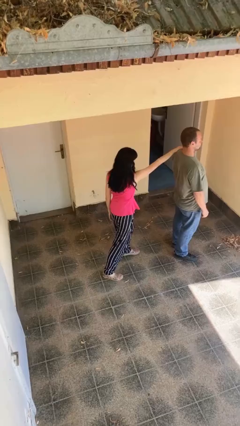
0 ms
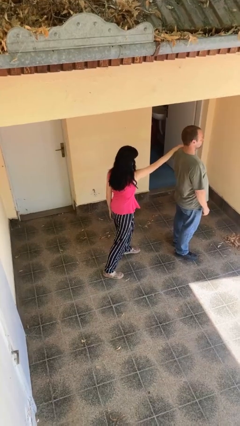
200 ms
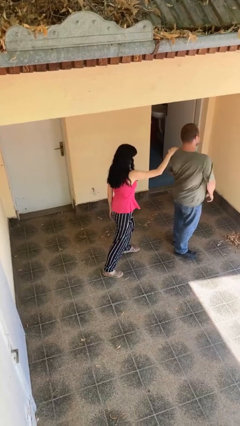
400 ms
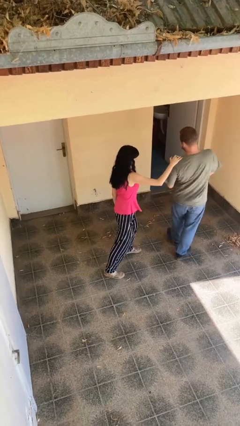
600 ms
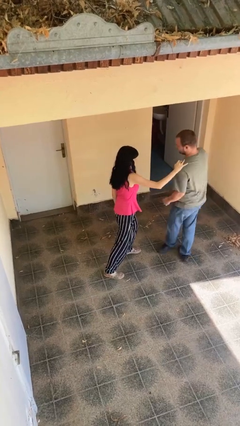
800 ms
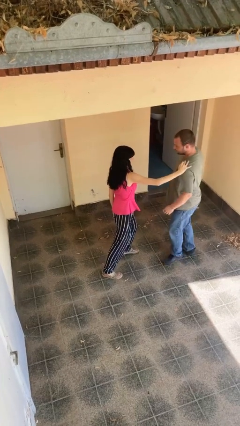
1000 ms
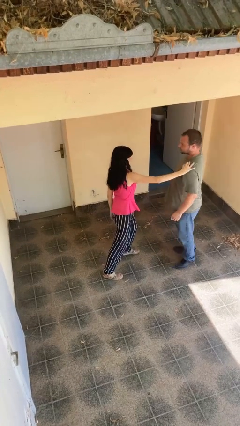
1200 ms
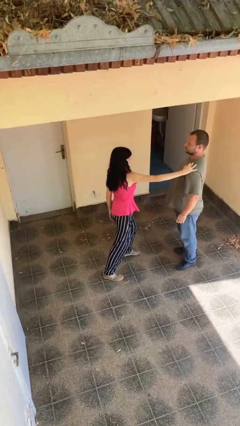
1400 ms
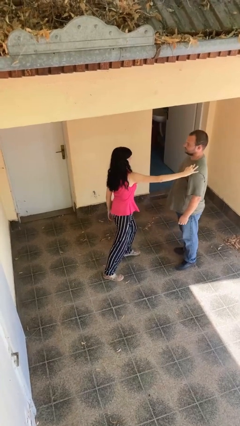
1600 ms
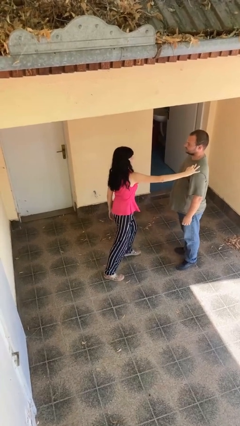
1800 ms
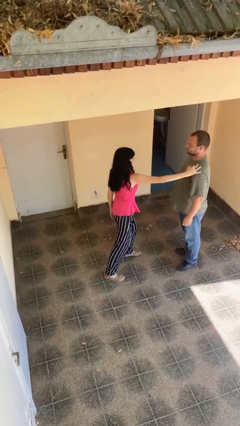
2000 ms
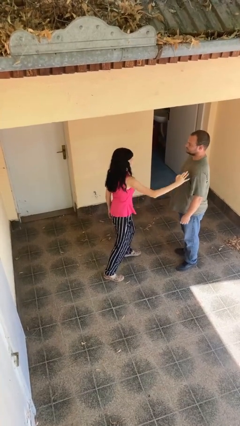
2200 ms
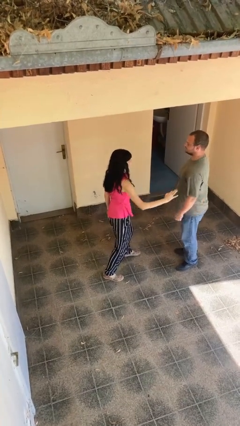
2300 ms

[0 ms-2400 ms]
person spins person around

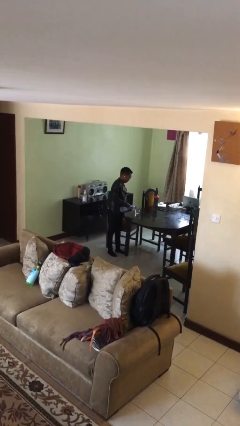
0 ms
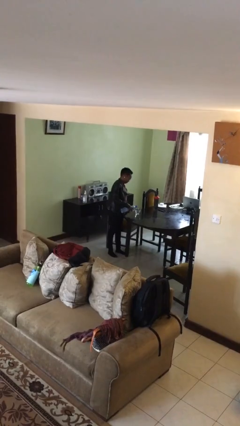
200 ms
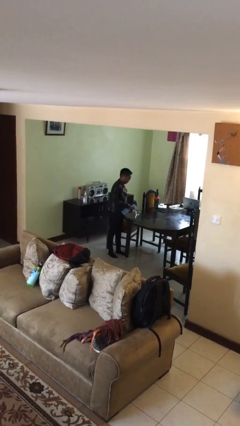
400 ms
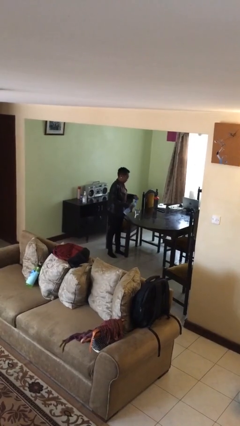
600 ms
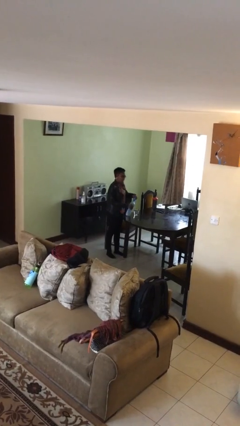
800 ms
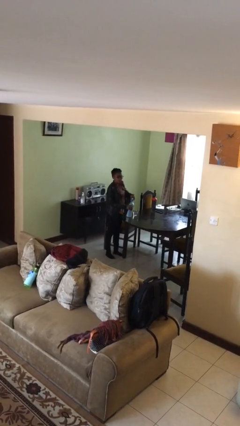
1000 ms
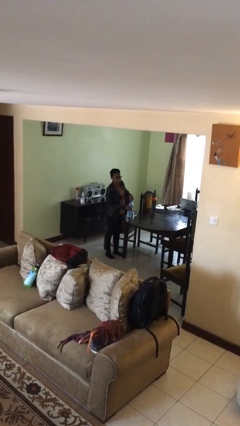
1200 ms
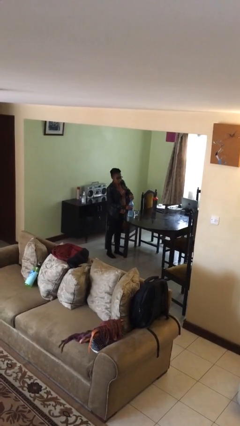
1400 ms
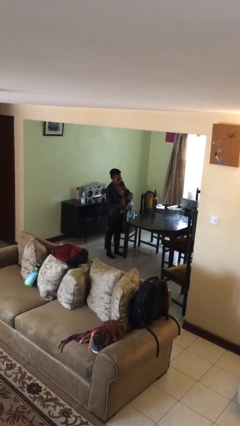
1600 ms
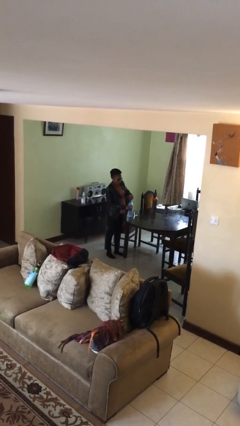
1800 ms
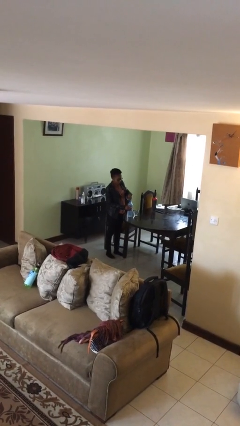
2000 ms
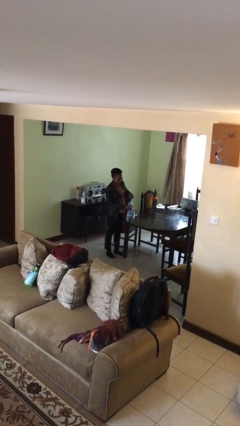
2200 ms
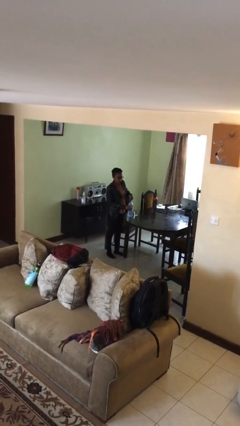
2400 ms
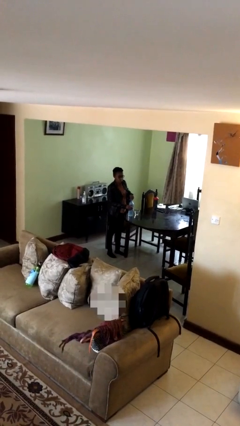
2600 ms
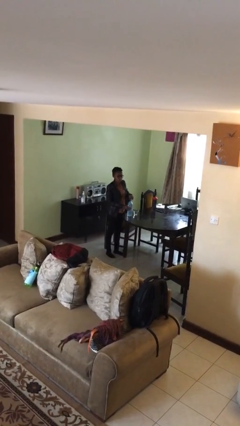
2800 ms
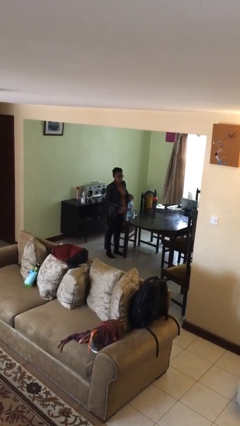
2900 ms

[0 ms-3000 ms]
person screws lid to bottle

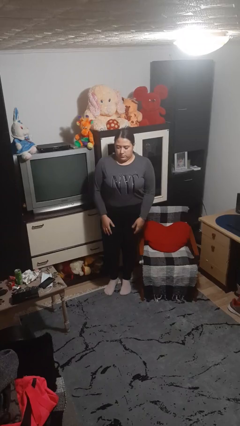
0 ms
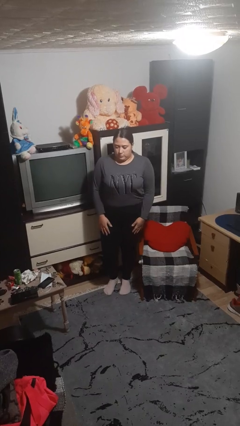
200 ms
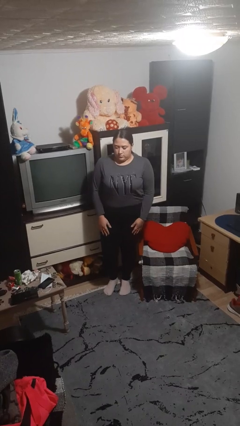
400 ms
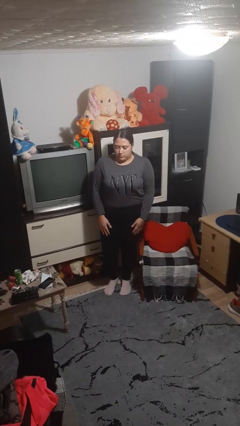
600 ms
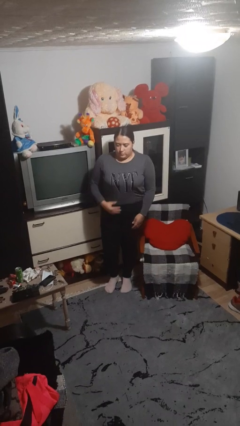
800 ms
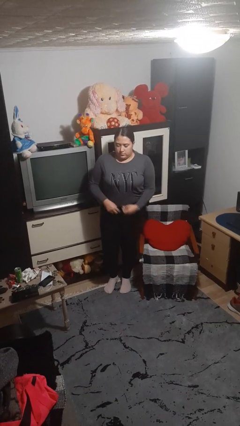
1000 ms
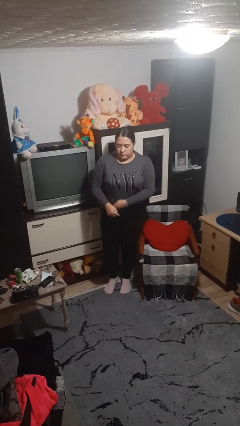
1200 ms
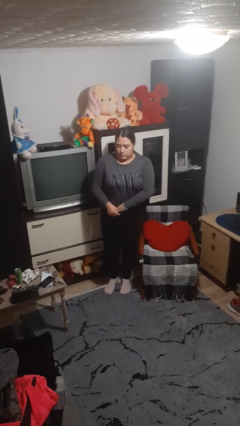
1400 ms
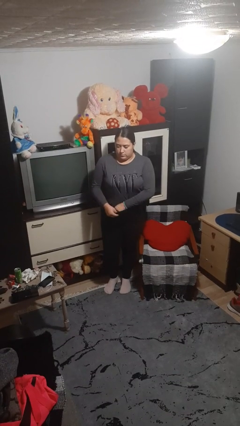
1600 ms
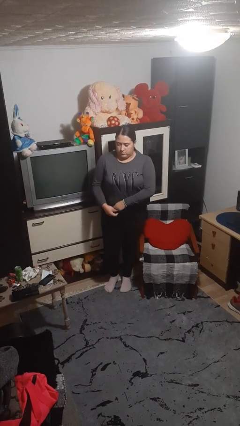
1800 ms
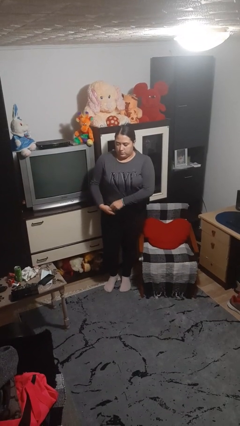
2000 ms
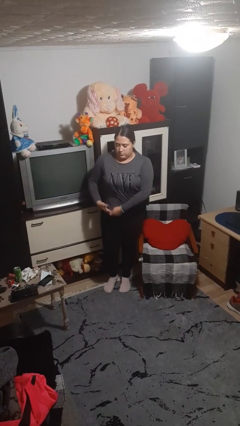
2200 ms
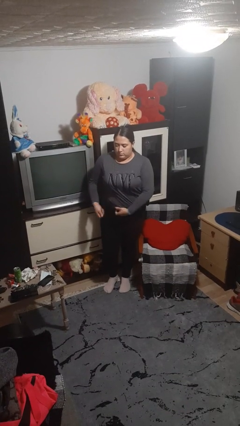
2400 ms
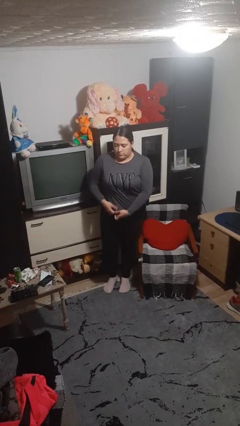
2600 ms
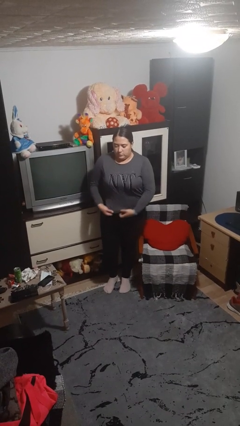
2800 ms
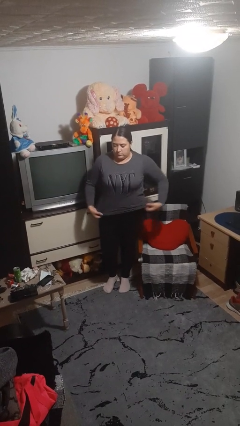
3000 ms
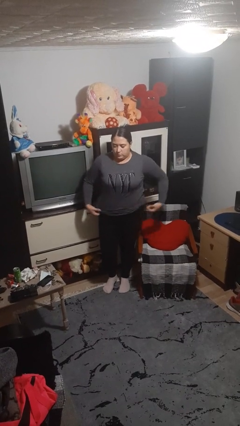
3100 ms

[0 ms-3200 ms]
person untucks shirt

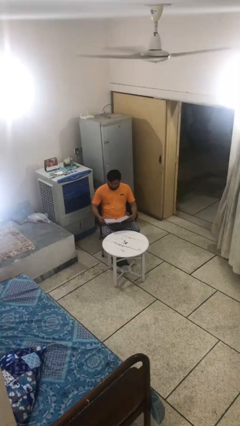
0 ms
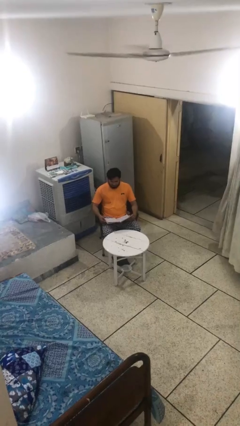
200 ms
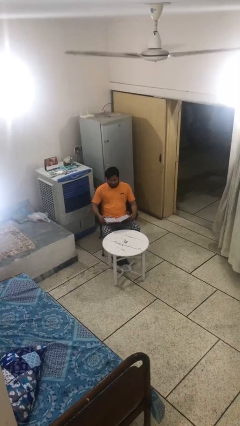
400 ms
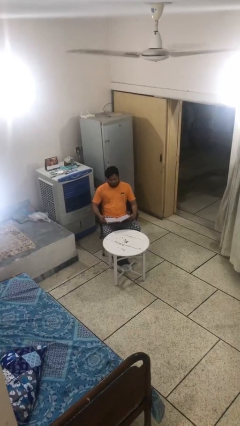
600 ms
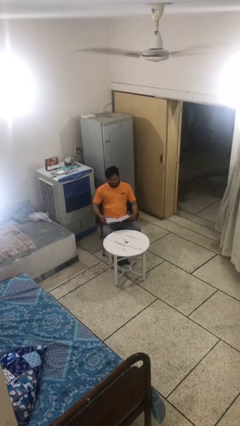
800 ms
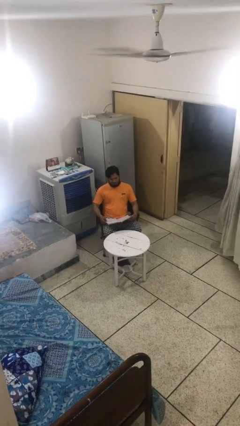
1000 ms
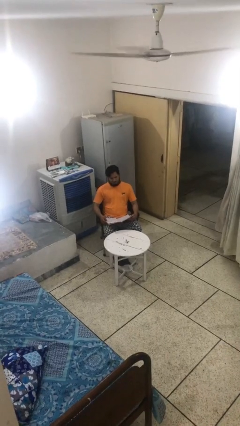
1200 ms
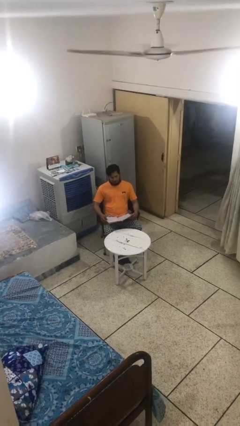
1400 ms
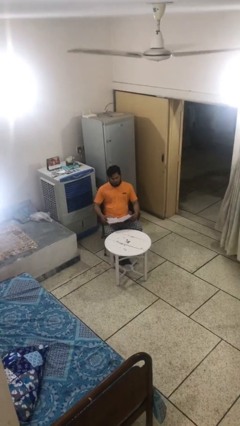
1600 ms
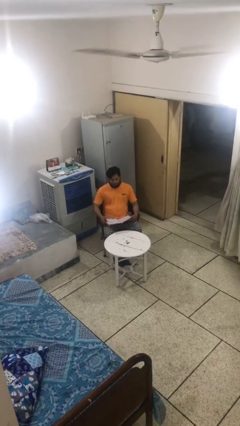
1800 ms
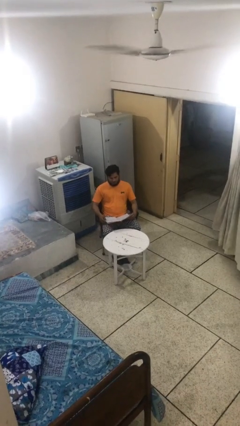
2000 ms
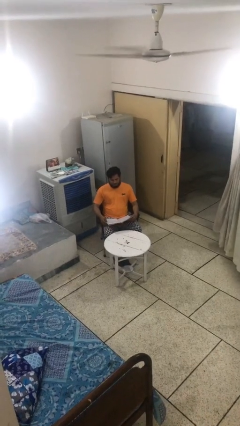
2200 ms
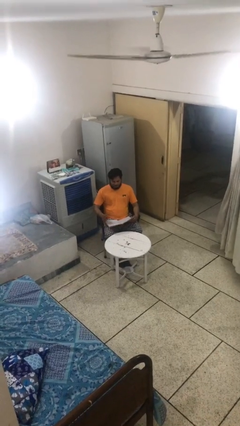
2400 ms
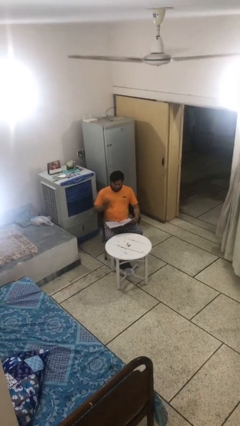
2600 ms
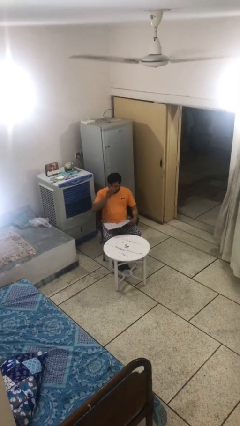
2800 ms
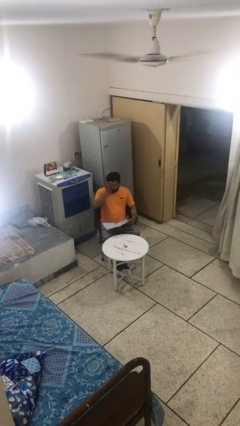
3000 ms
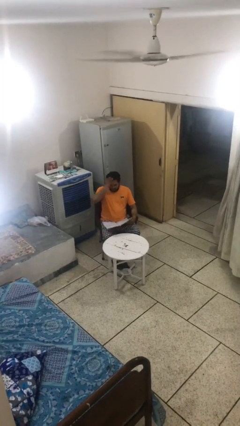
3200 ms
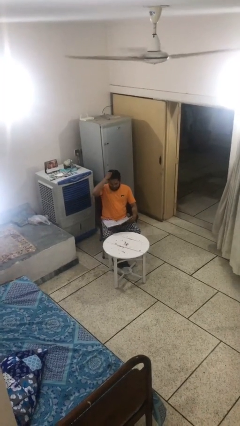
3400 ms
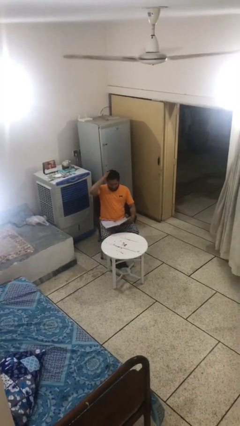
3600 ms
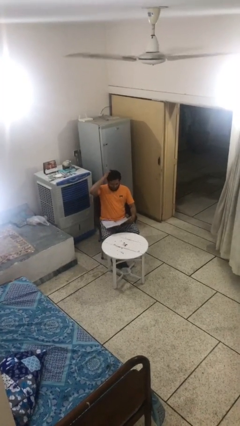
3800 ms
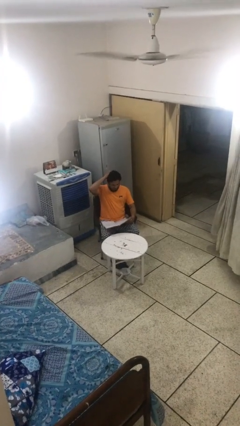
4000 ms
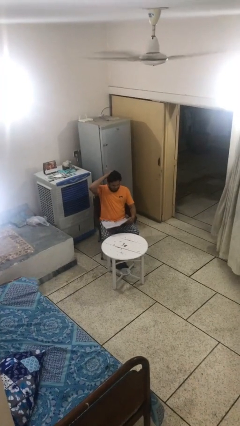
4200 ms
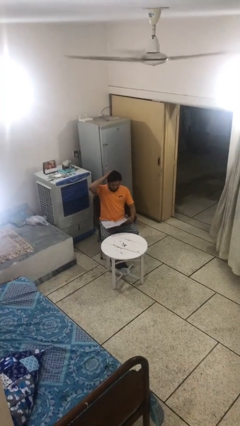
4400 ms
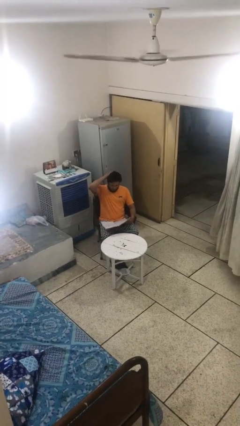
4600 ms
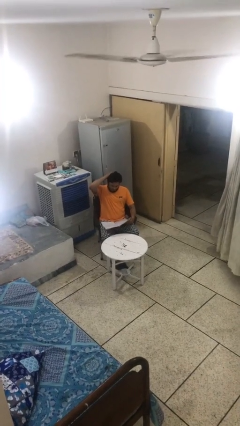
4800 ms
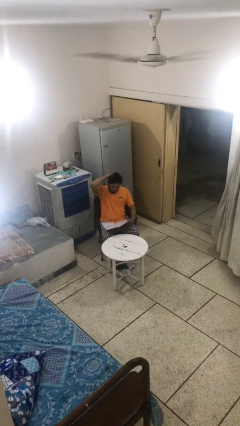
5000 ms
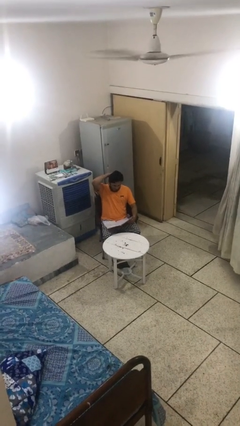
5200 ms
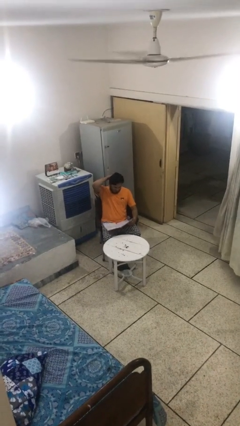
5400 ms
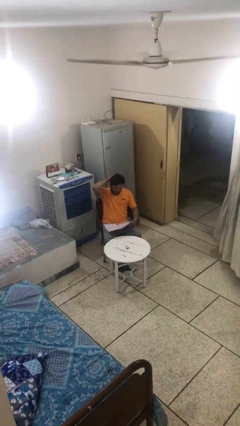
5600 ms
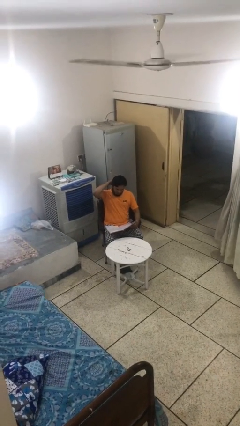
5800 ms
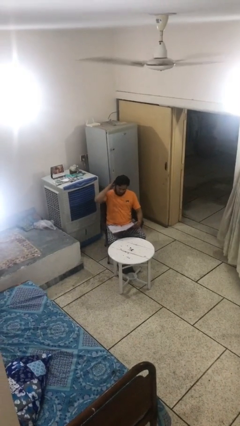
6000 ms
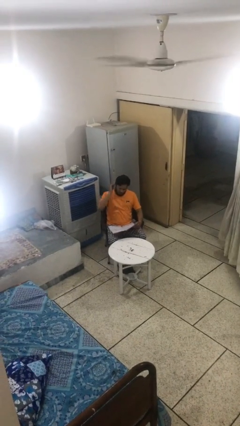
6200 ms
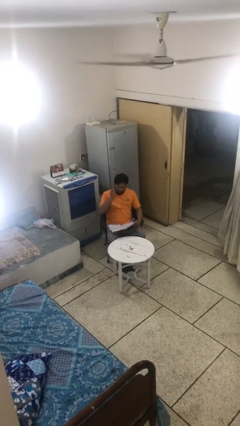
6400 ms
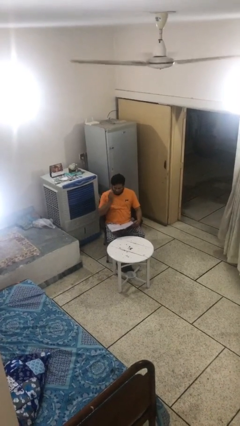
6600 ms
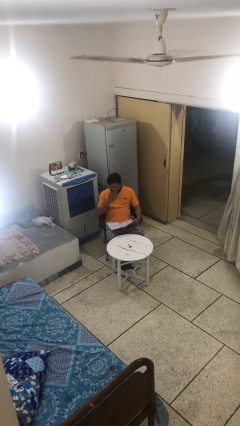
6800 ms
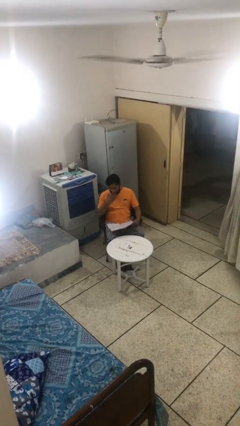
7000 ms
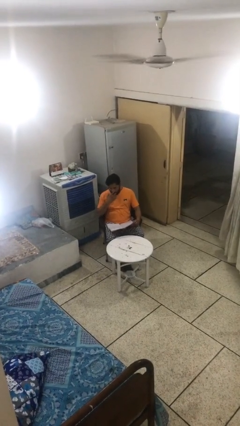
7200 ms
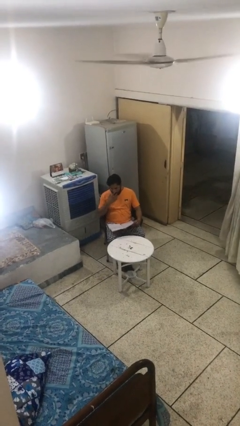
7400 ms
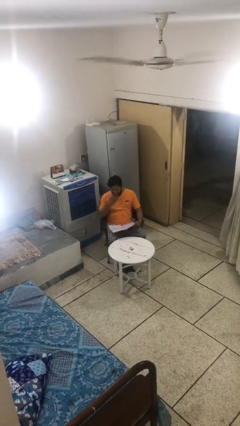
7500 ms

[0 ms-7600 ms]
person reads document

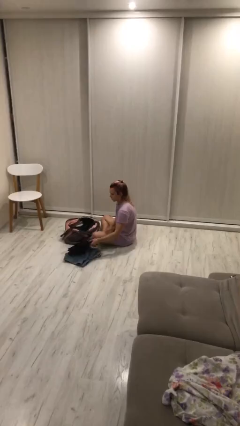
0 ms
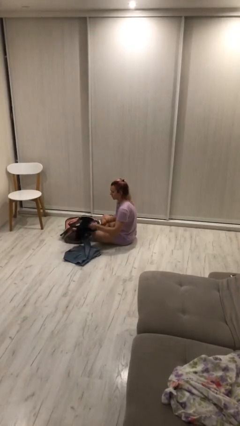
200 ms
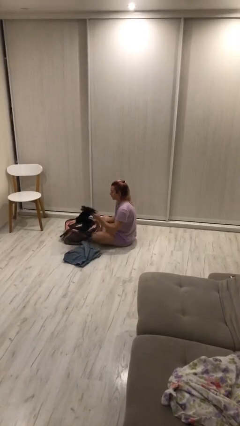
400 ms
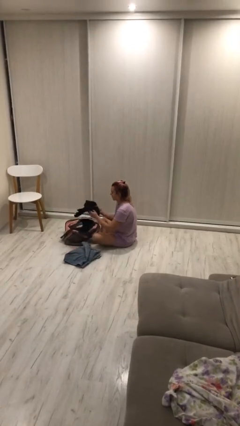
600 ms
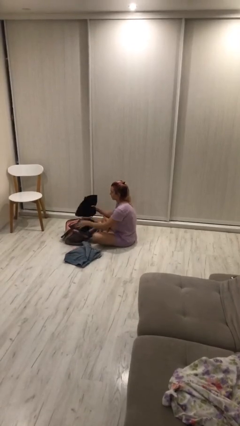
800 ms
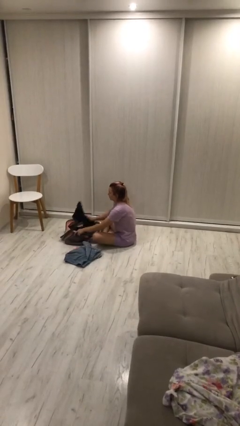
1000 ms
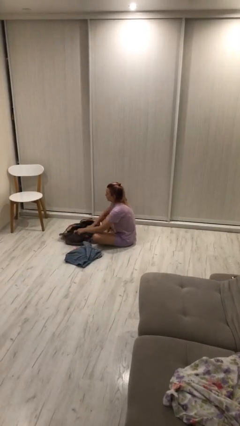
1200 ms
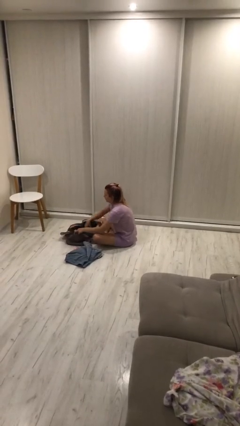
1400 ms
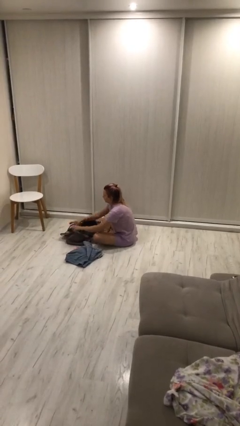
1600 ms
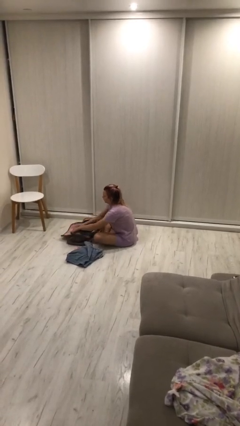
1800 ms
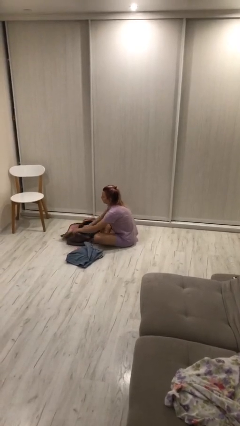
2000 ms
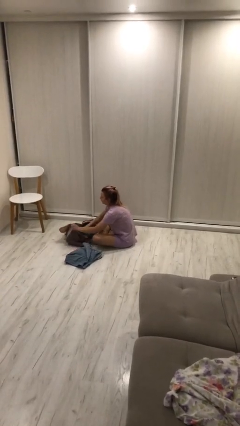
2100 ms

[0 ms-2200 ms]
person loads clothes into suitcase
